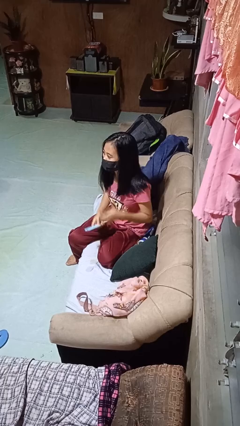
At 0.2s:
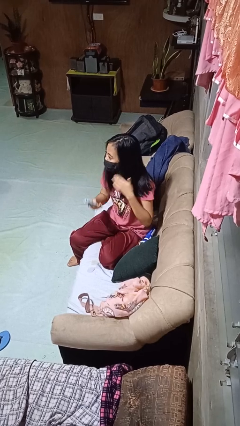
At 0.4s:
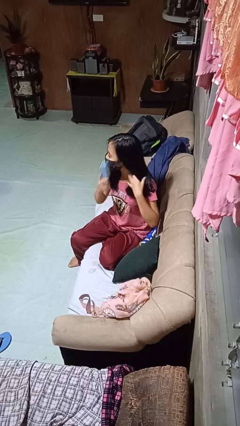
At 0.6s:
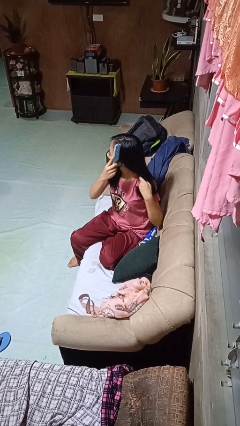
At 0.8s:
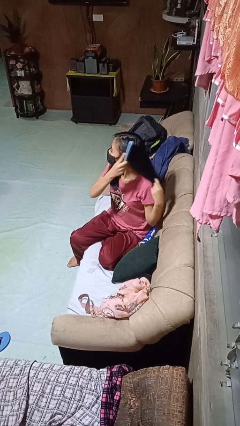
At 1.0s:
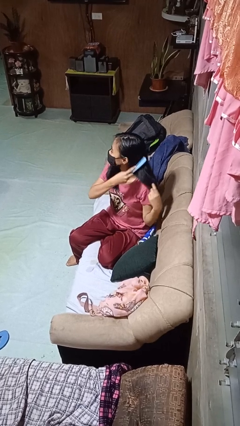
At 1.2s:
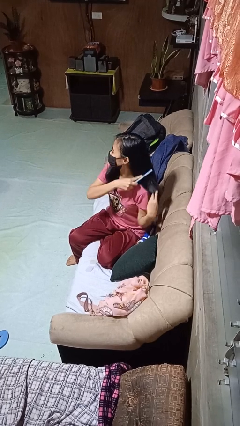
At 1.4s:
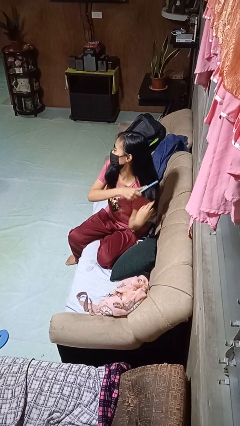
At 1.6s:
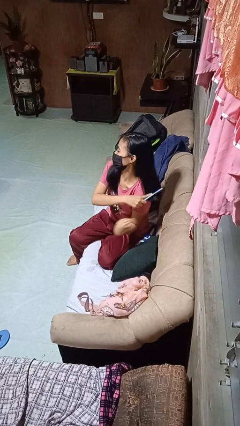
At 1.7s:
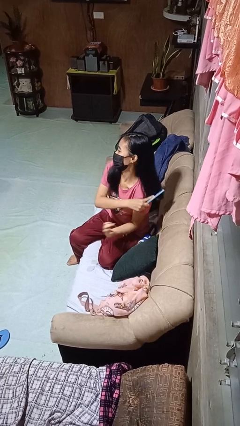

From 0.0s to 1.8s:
person brushes hair

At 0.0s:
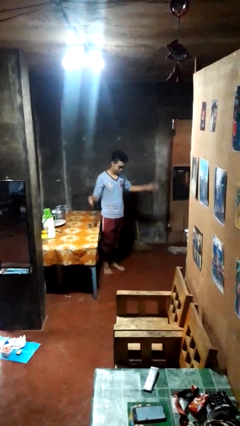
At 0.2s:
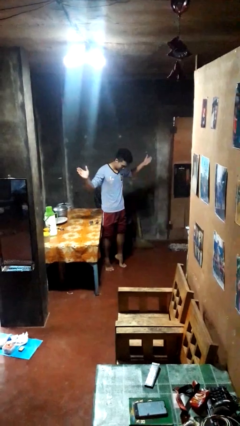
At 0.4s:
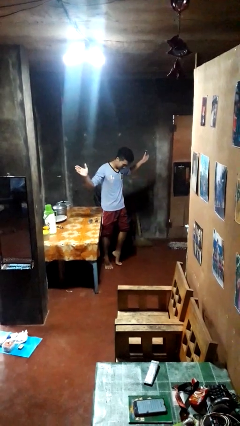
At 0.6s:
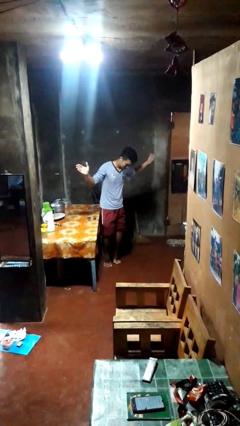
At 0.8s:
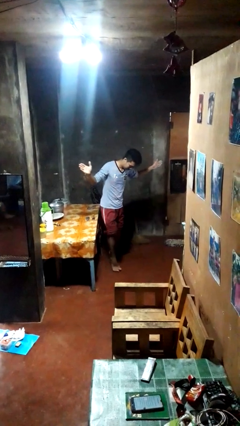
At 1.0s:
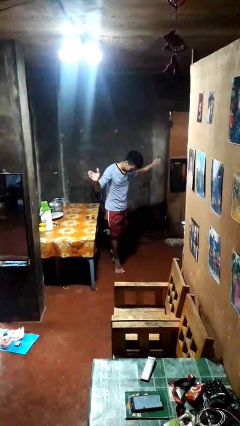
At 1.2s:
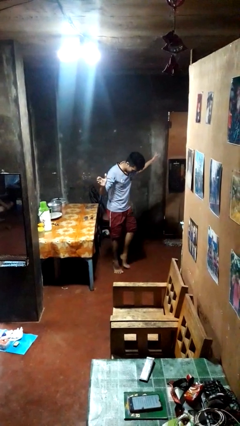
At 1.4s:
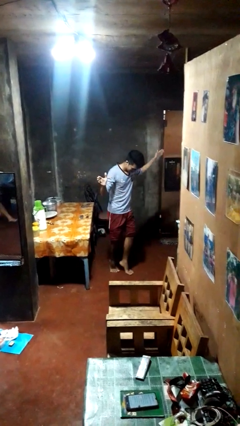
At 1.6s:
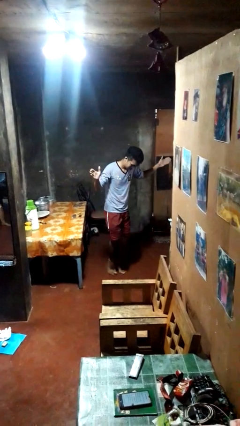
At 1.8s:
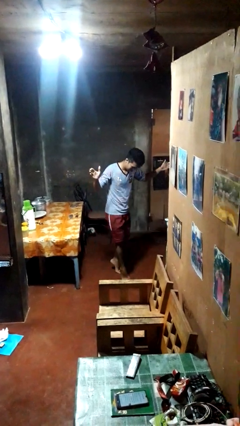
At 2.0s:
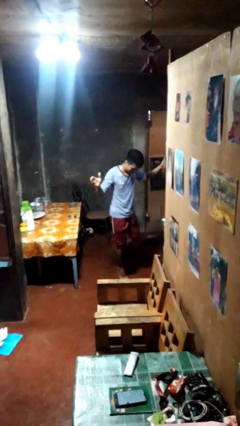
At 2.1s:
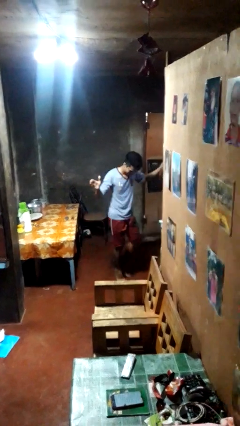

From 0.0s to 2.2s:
person walks tiptoe

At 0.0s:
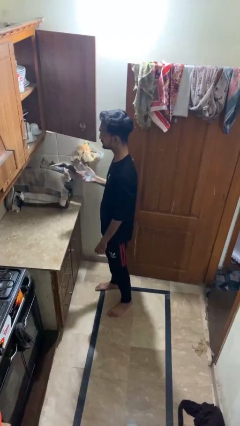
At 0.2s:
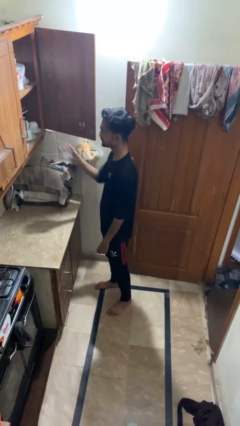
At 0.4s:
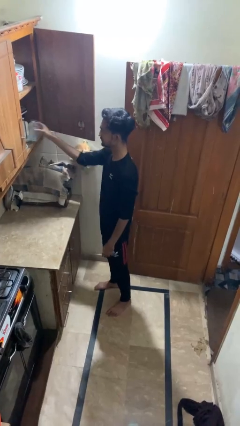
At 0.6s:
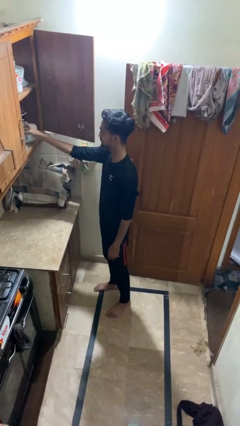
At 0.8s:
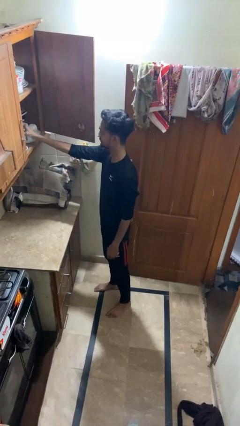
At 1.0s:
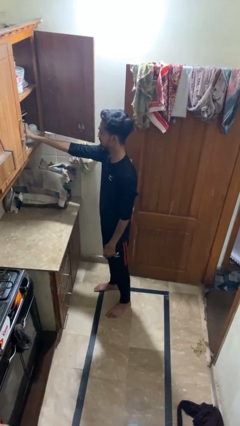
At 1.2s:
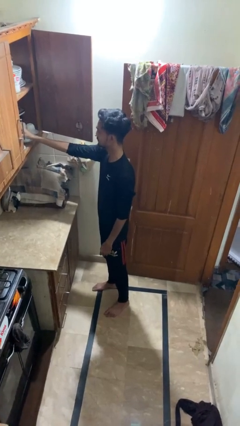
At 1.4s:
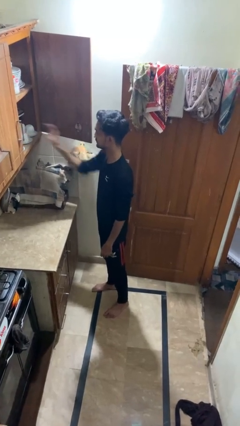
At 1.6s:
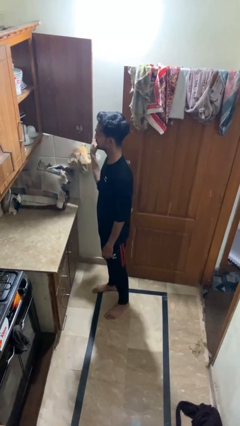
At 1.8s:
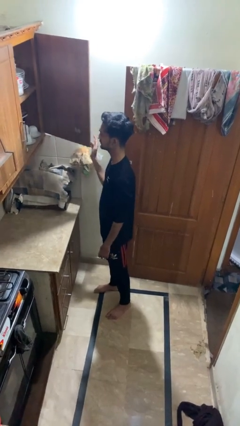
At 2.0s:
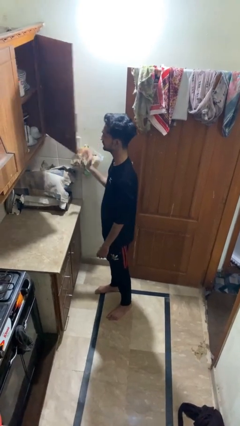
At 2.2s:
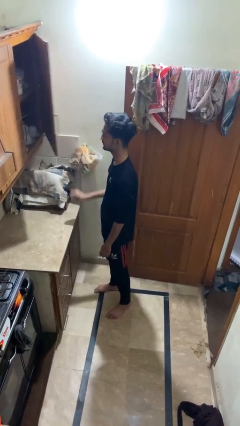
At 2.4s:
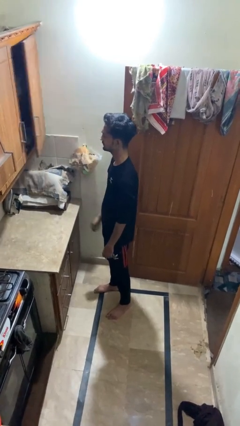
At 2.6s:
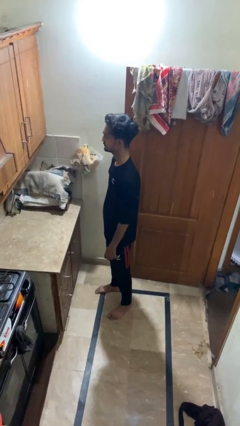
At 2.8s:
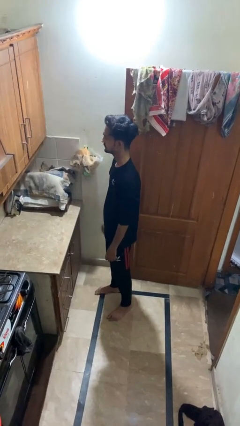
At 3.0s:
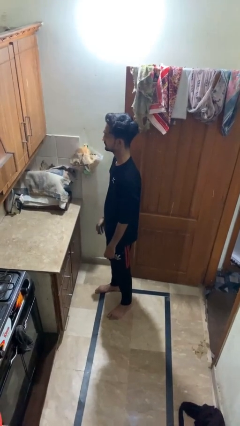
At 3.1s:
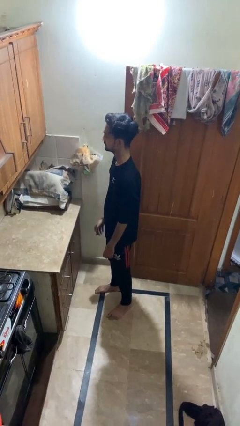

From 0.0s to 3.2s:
person takes object from cabinet

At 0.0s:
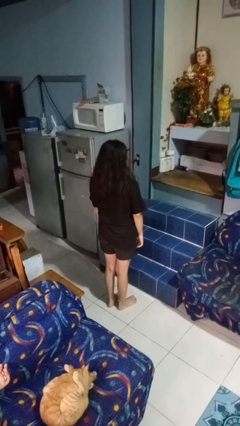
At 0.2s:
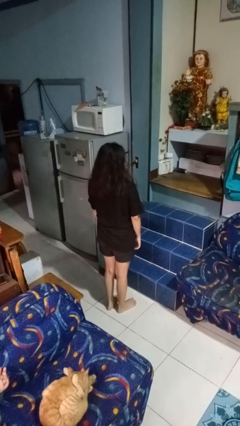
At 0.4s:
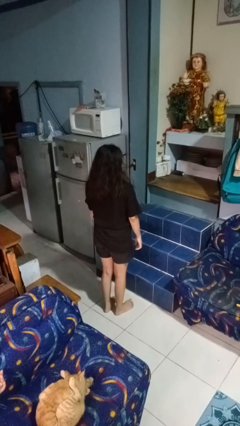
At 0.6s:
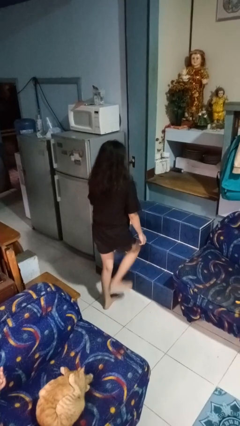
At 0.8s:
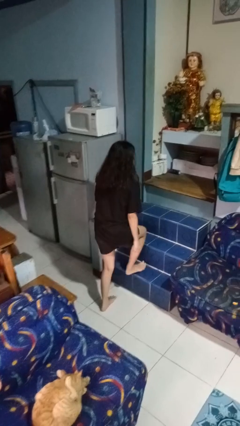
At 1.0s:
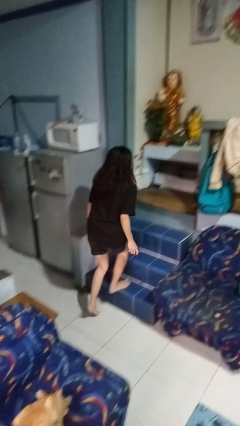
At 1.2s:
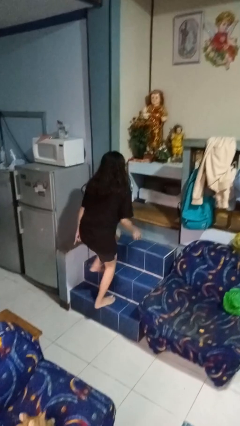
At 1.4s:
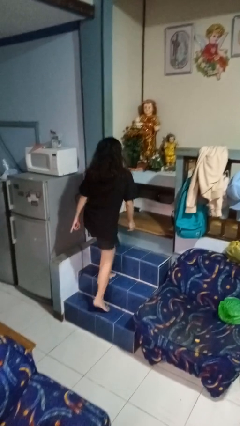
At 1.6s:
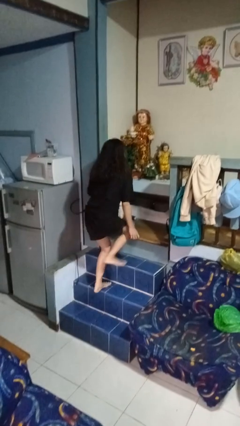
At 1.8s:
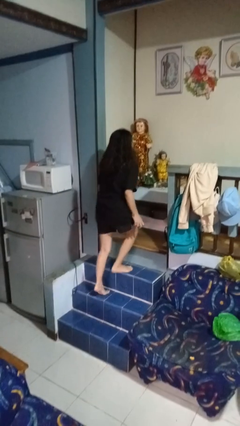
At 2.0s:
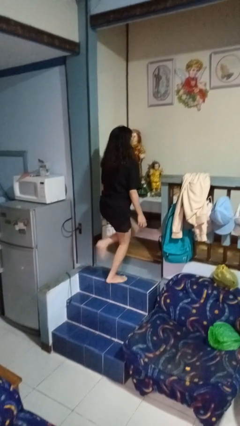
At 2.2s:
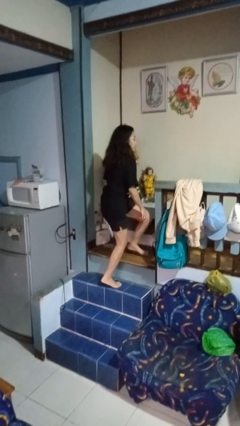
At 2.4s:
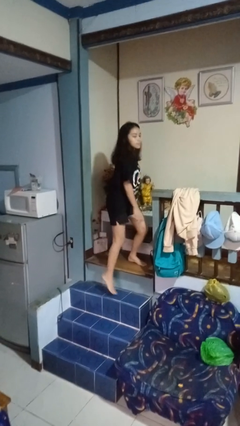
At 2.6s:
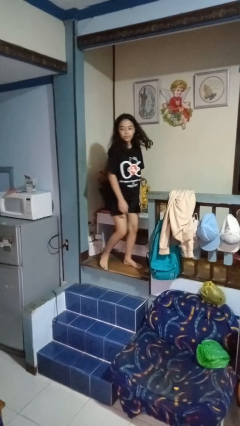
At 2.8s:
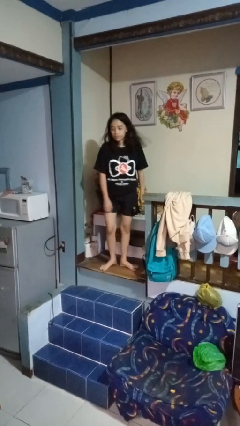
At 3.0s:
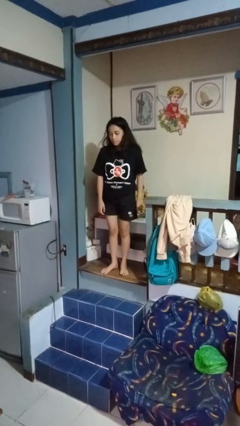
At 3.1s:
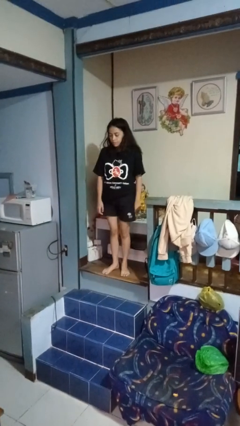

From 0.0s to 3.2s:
person climbs up stairs

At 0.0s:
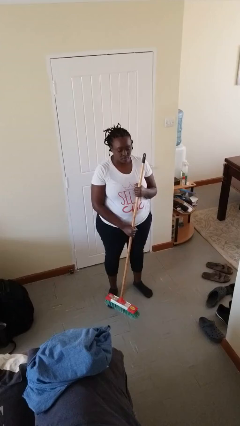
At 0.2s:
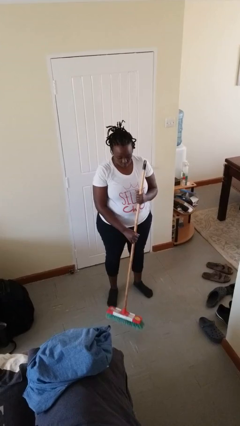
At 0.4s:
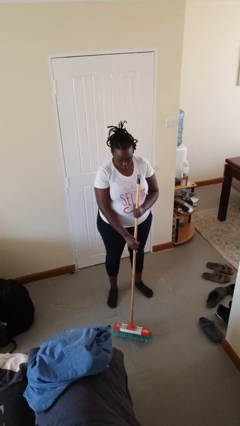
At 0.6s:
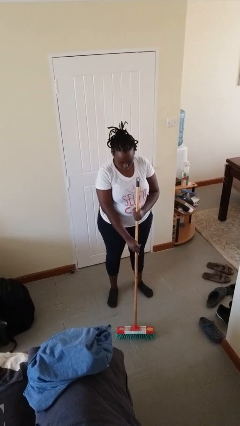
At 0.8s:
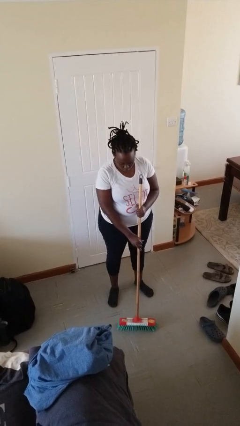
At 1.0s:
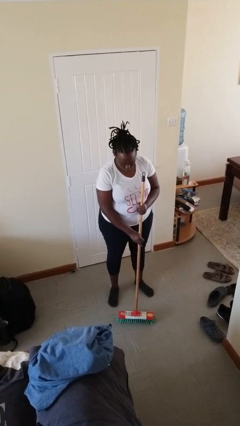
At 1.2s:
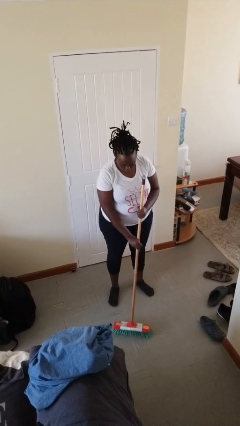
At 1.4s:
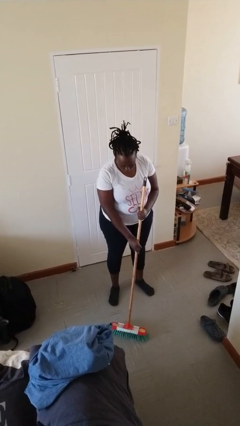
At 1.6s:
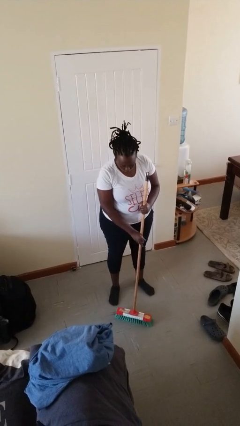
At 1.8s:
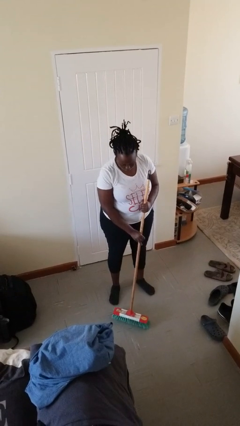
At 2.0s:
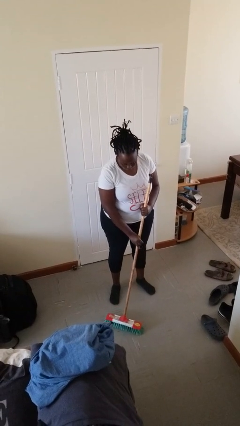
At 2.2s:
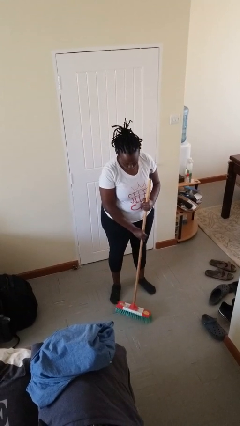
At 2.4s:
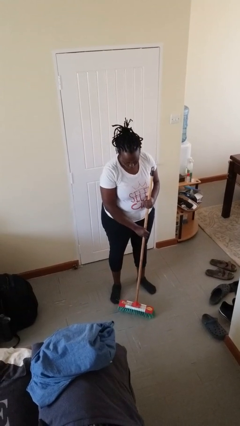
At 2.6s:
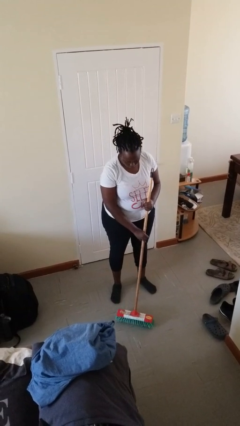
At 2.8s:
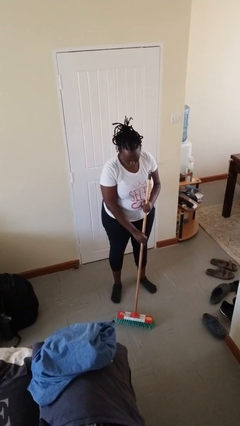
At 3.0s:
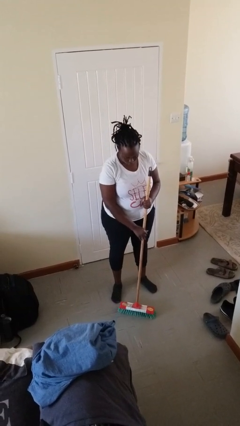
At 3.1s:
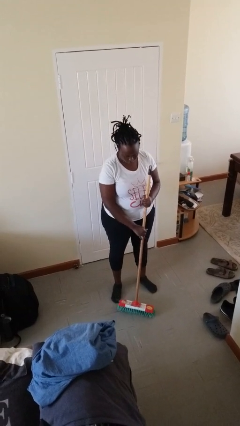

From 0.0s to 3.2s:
person sweeps floor

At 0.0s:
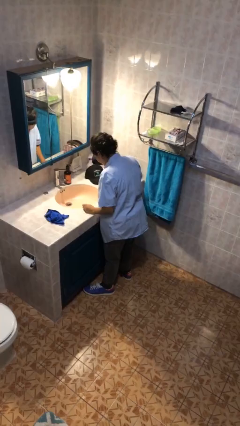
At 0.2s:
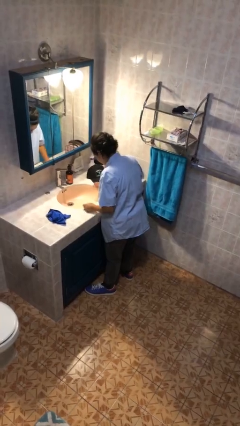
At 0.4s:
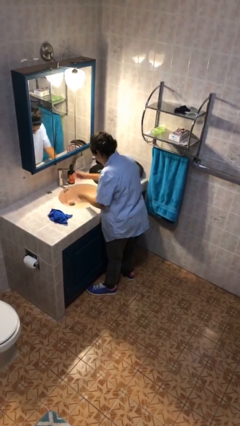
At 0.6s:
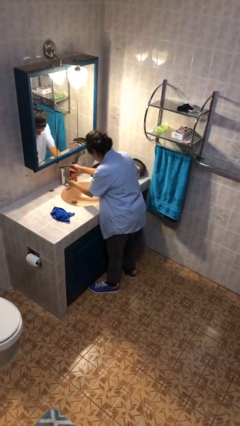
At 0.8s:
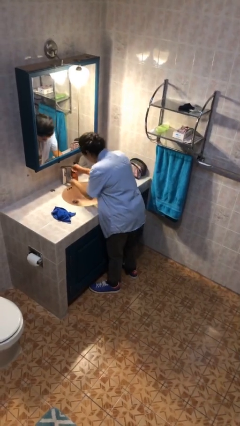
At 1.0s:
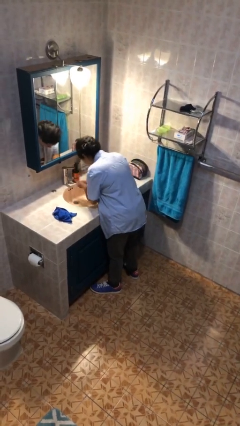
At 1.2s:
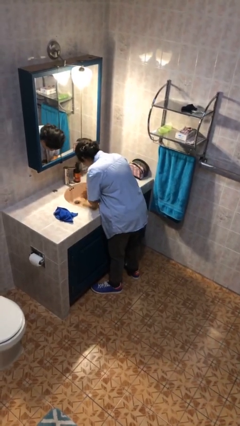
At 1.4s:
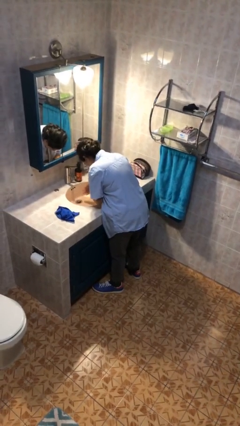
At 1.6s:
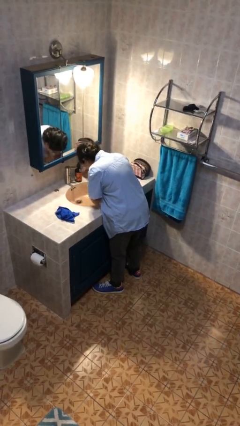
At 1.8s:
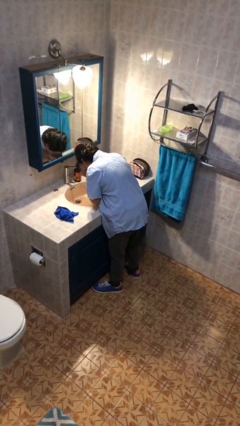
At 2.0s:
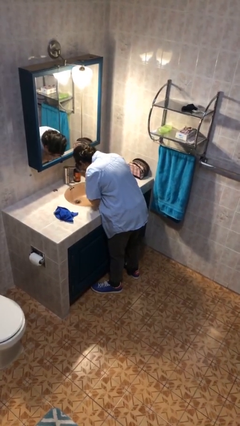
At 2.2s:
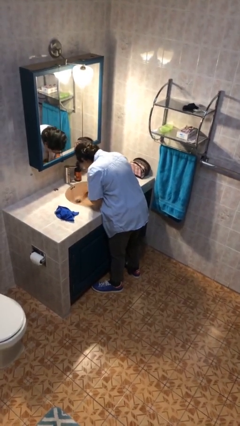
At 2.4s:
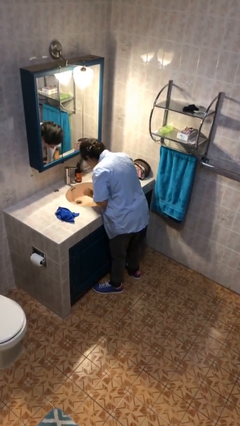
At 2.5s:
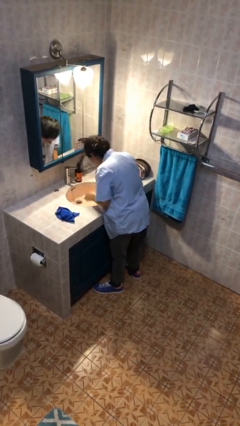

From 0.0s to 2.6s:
person washes face

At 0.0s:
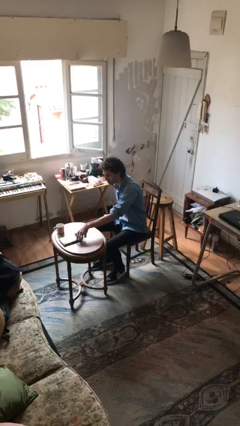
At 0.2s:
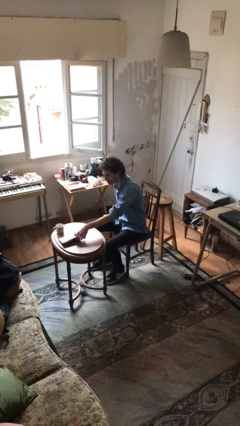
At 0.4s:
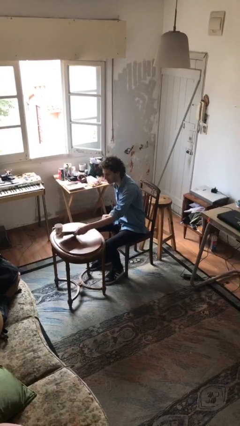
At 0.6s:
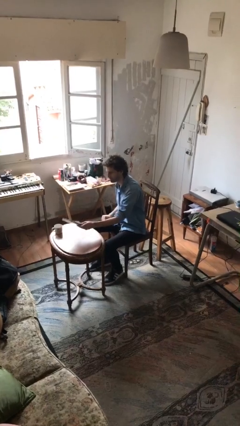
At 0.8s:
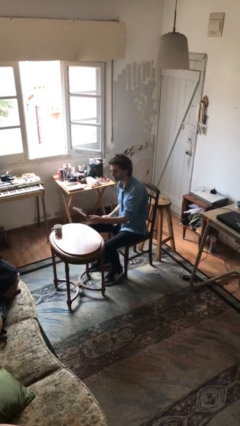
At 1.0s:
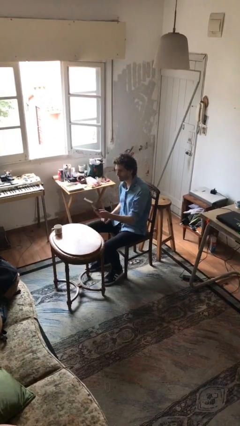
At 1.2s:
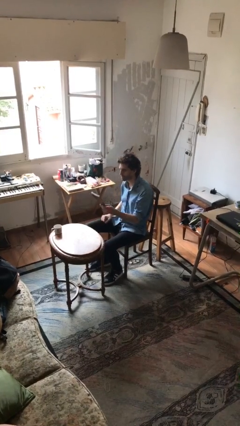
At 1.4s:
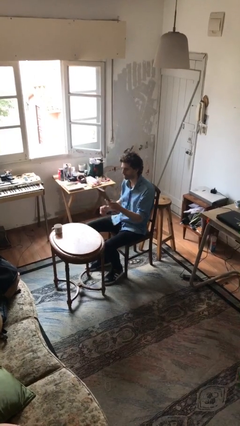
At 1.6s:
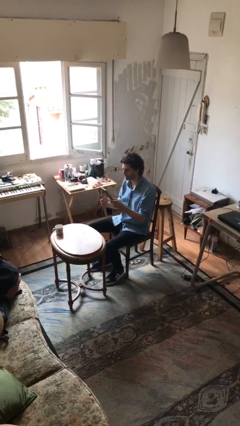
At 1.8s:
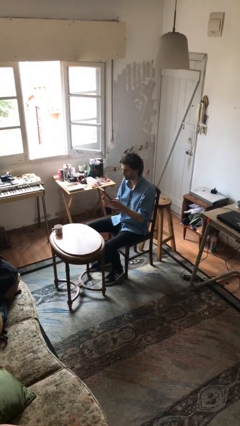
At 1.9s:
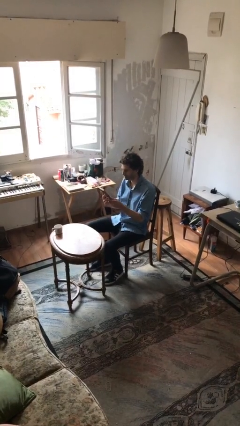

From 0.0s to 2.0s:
person picks up object from table
